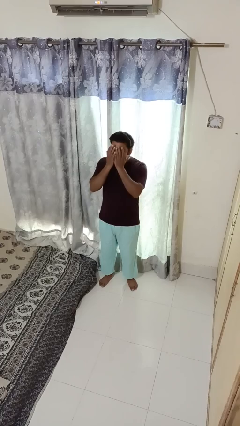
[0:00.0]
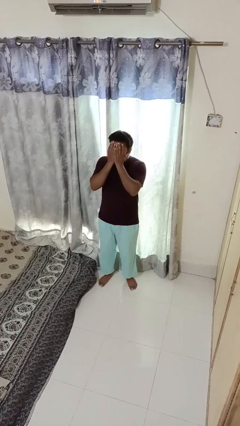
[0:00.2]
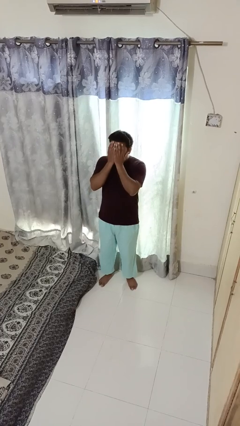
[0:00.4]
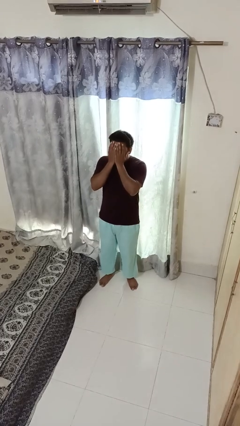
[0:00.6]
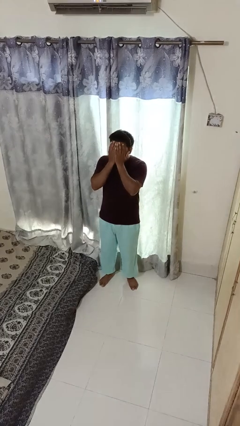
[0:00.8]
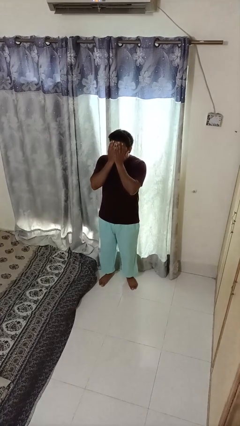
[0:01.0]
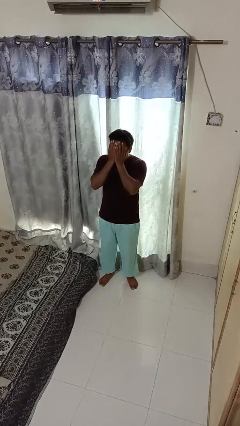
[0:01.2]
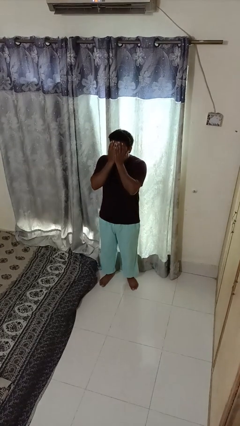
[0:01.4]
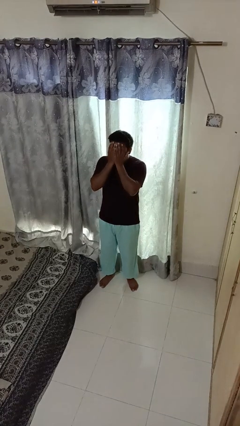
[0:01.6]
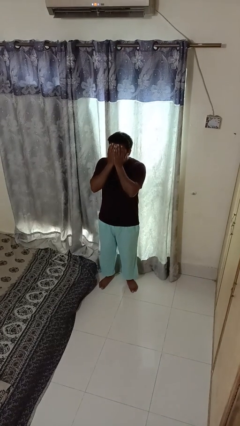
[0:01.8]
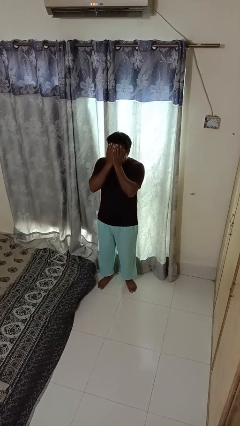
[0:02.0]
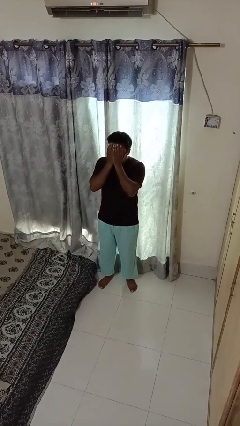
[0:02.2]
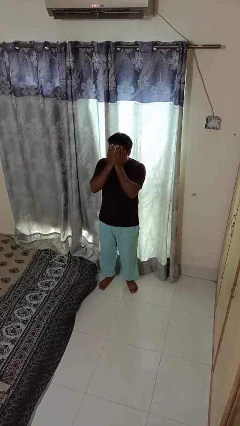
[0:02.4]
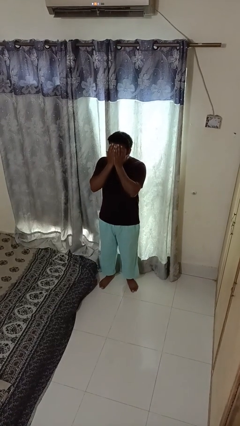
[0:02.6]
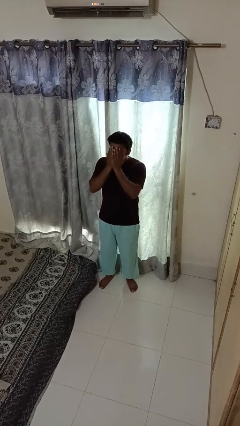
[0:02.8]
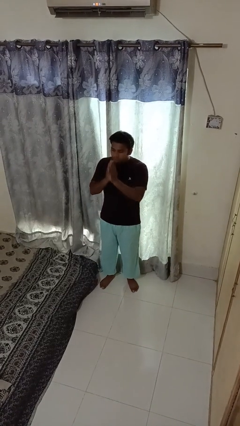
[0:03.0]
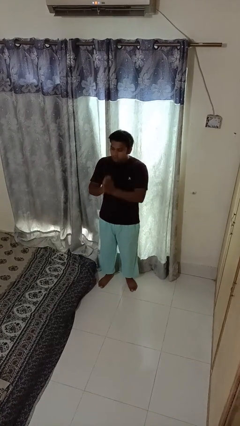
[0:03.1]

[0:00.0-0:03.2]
person covers face with hands

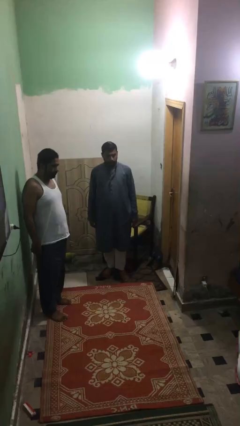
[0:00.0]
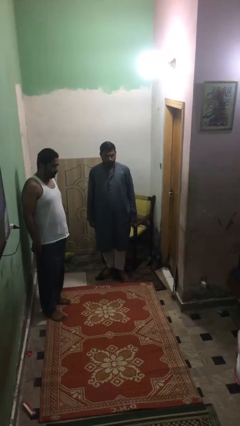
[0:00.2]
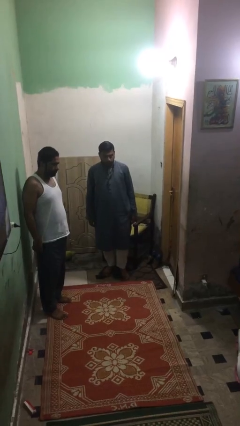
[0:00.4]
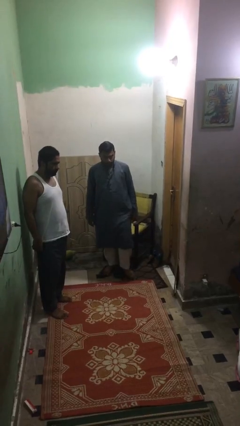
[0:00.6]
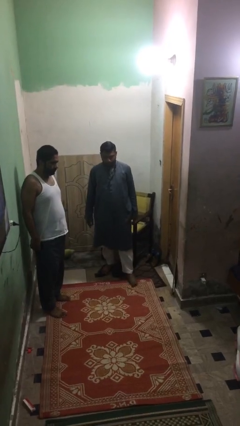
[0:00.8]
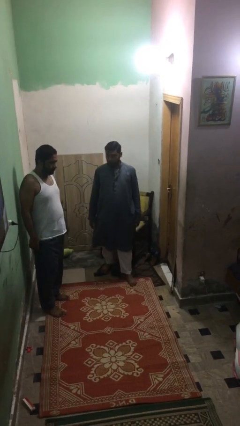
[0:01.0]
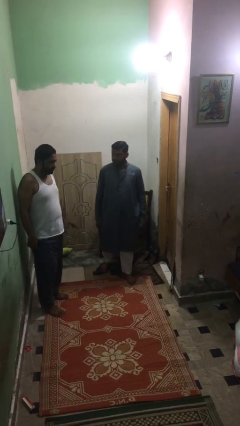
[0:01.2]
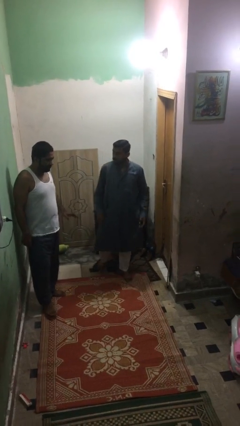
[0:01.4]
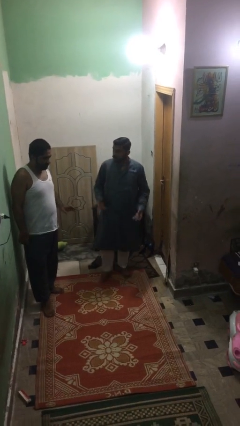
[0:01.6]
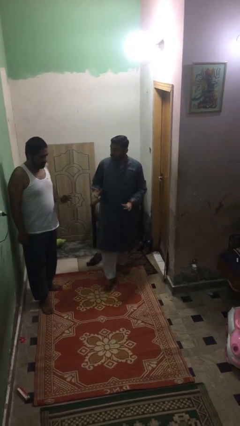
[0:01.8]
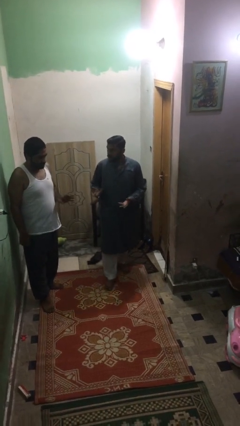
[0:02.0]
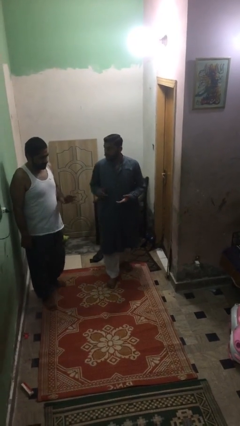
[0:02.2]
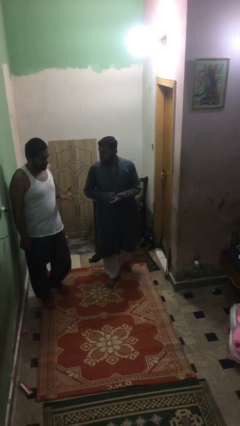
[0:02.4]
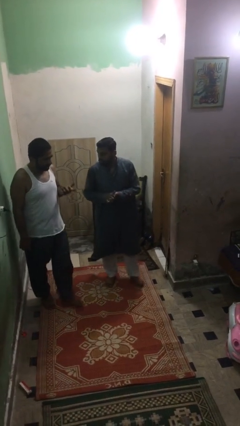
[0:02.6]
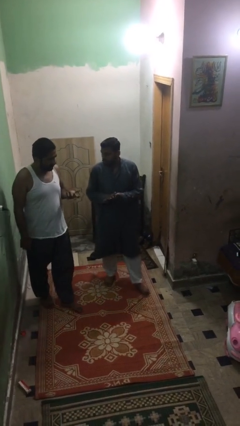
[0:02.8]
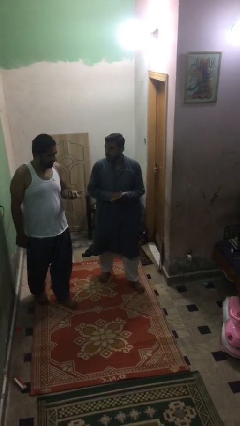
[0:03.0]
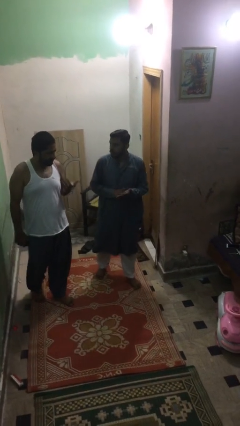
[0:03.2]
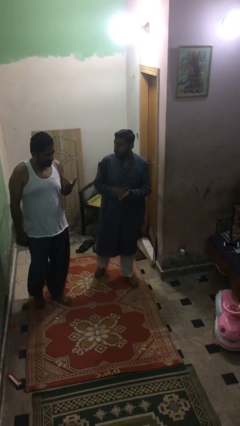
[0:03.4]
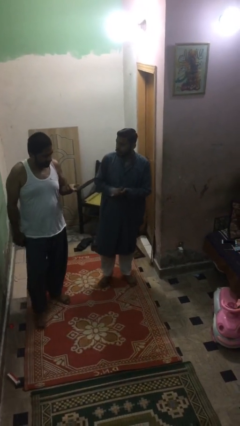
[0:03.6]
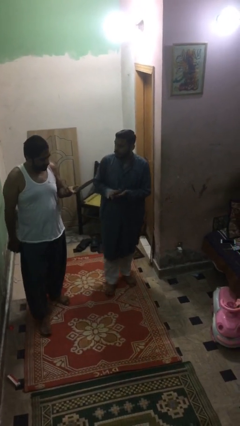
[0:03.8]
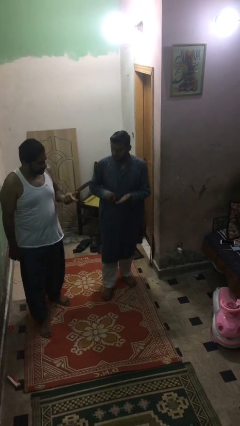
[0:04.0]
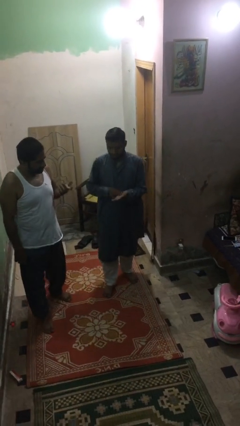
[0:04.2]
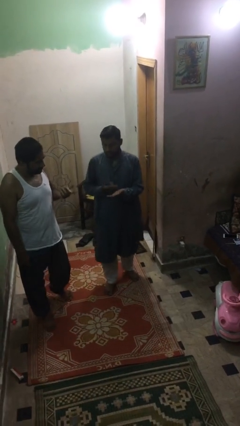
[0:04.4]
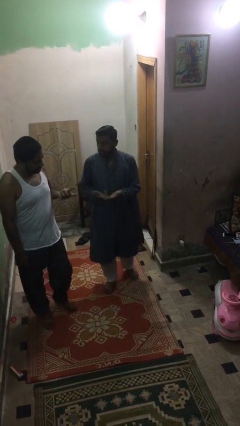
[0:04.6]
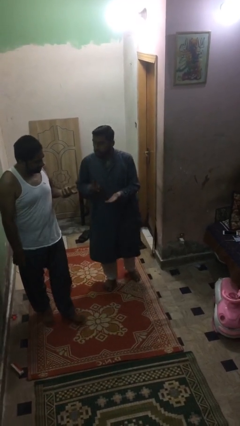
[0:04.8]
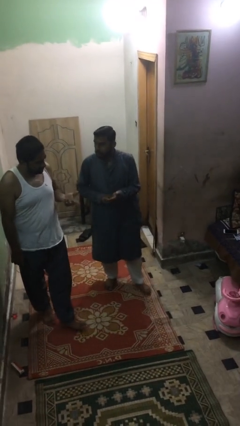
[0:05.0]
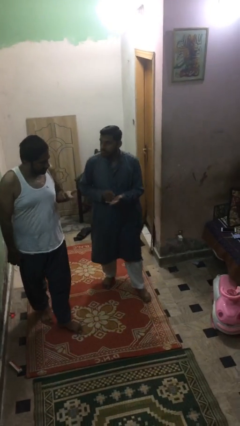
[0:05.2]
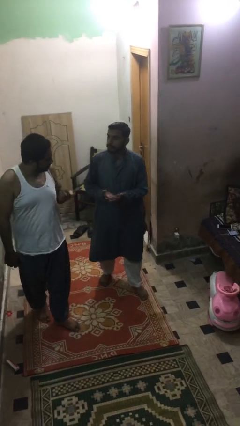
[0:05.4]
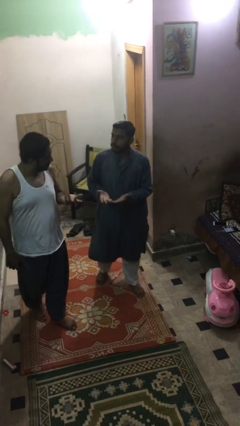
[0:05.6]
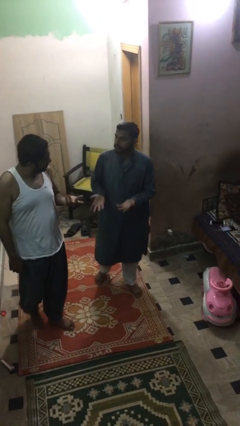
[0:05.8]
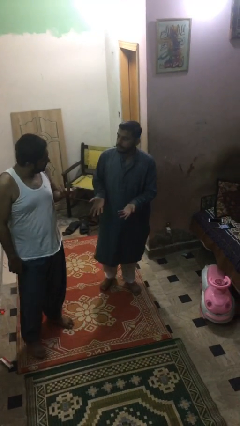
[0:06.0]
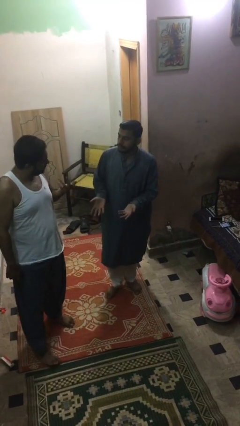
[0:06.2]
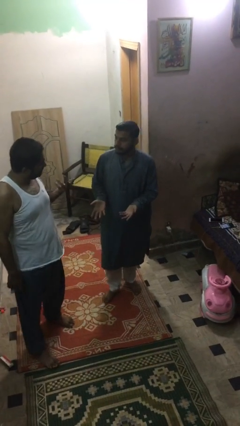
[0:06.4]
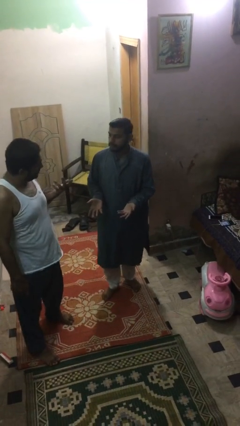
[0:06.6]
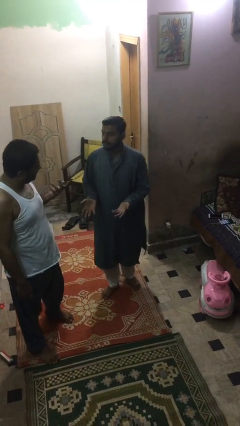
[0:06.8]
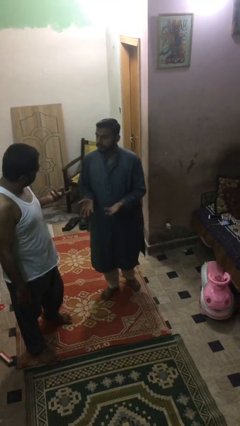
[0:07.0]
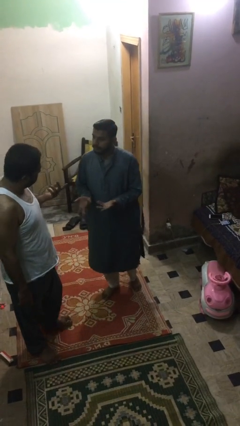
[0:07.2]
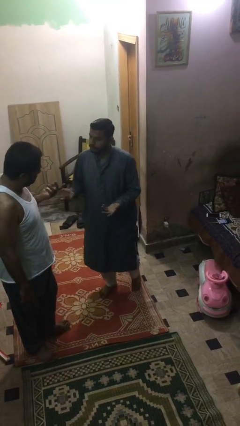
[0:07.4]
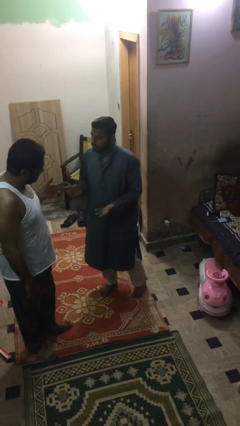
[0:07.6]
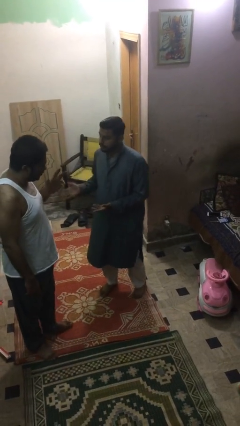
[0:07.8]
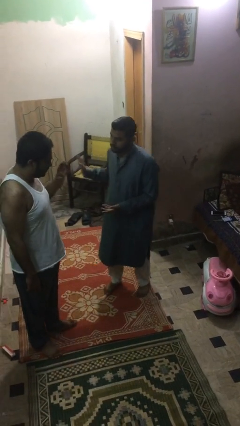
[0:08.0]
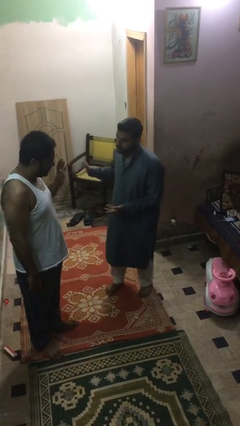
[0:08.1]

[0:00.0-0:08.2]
person talks to person

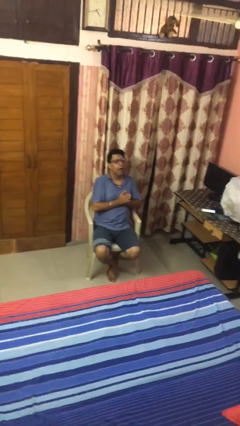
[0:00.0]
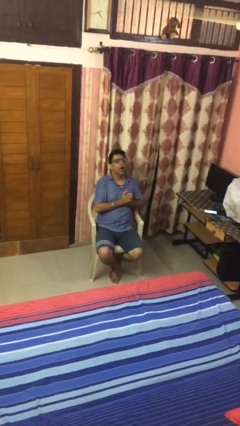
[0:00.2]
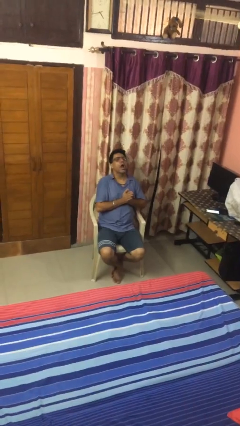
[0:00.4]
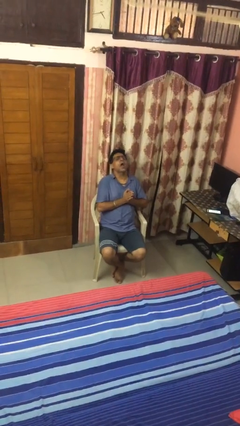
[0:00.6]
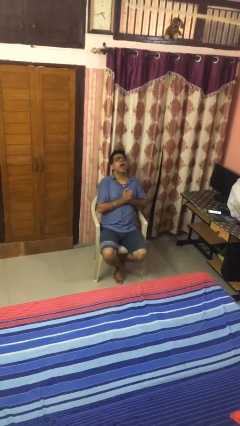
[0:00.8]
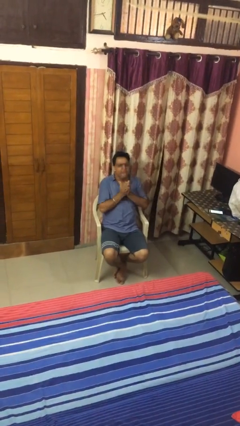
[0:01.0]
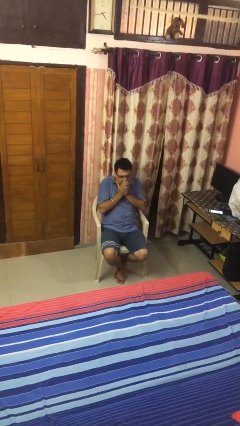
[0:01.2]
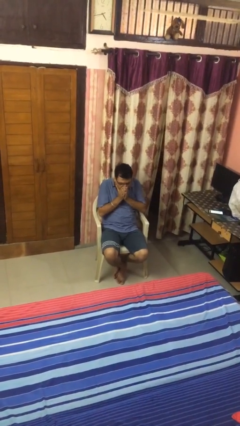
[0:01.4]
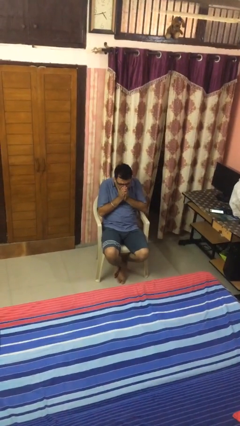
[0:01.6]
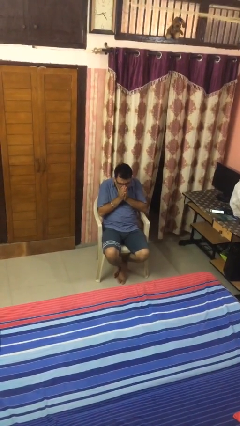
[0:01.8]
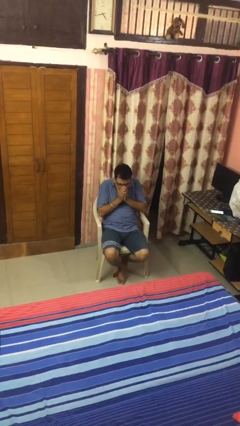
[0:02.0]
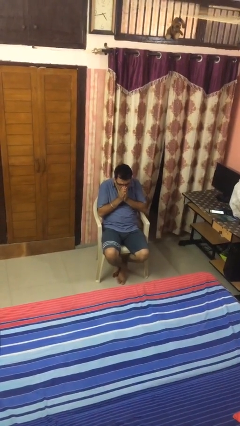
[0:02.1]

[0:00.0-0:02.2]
person sneezes into hand

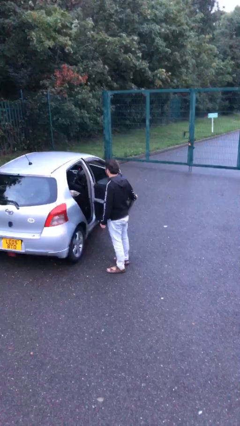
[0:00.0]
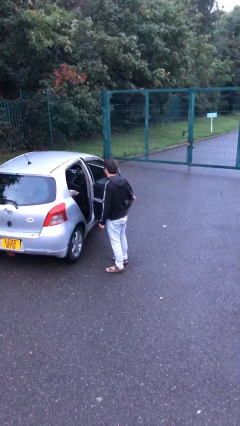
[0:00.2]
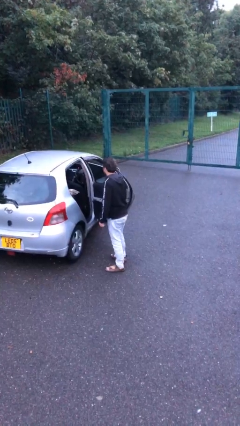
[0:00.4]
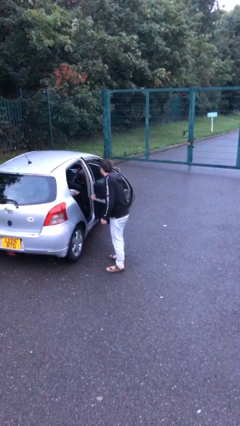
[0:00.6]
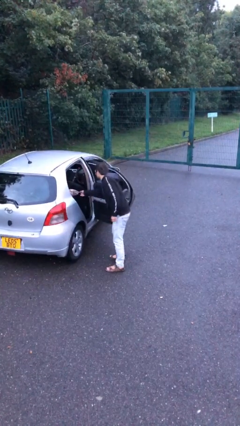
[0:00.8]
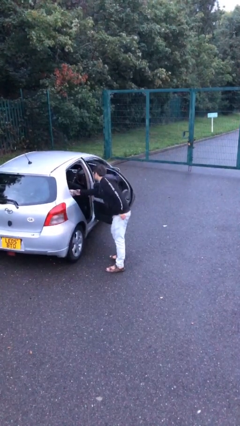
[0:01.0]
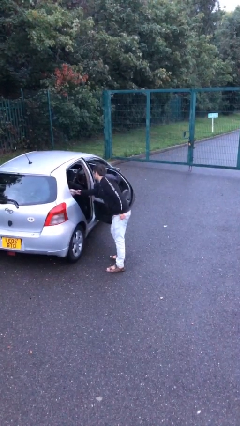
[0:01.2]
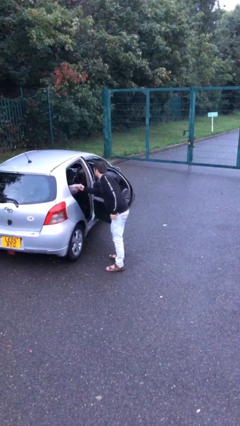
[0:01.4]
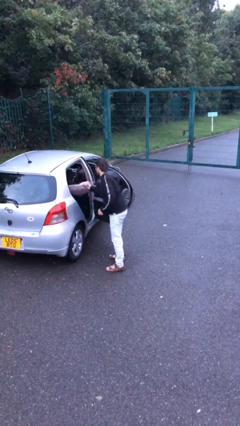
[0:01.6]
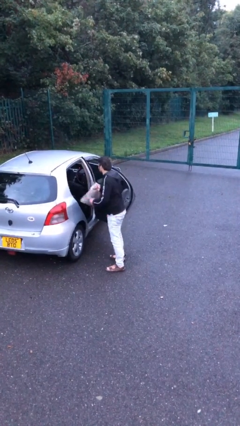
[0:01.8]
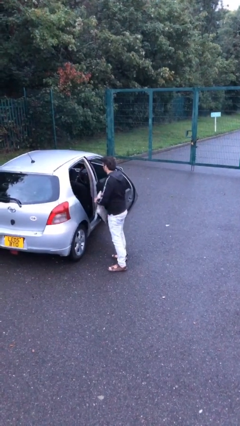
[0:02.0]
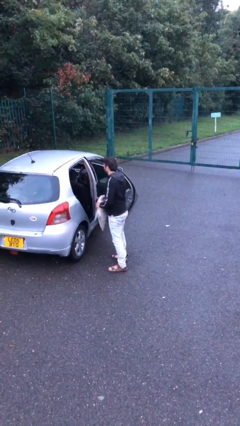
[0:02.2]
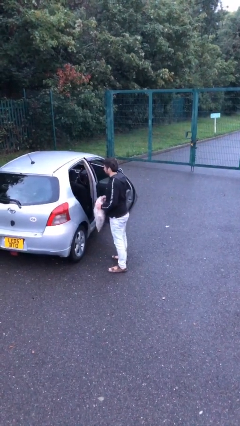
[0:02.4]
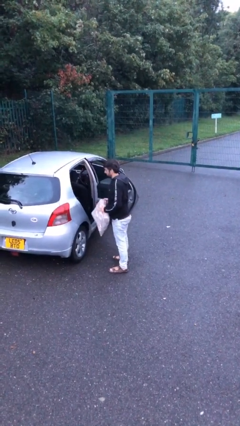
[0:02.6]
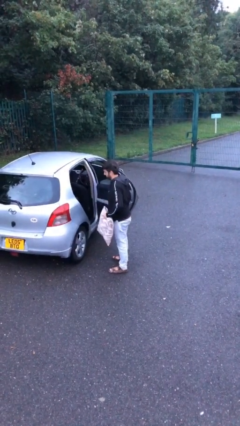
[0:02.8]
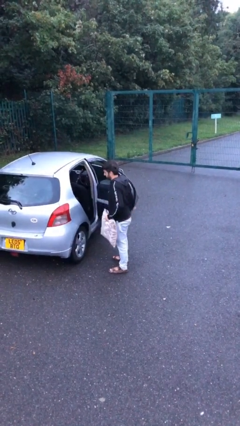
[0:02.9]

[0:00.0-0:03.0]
person unloads car

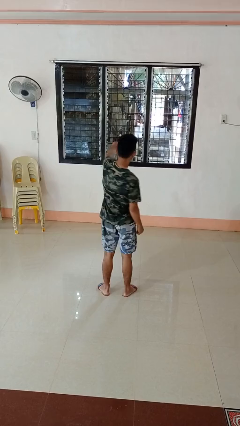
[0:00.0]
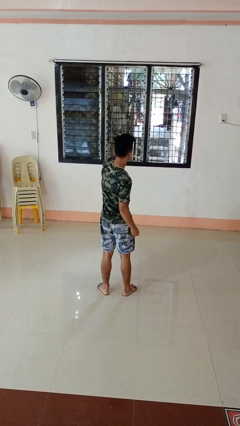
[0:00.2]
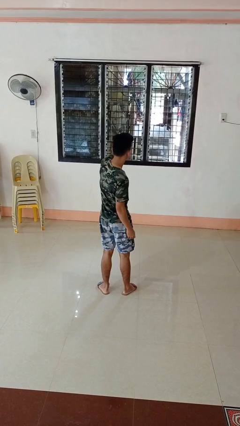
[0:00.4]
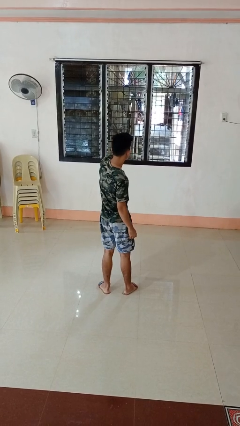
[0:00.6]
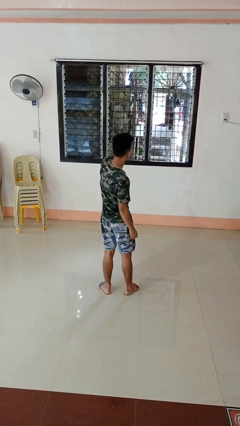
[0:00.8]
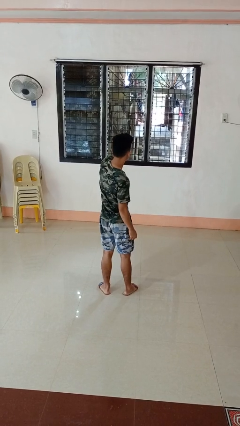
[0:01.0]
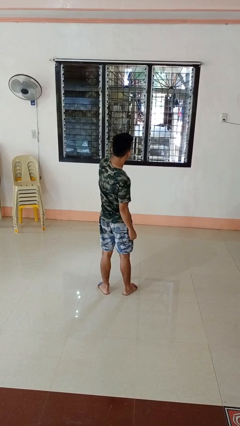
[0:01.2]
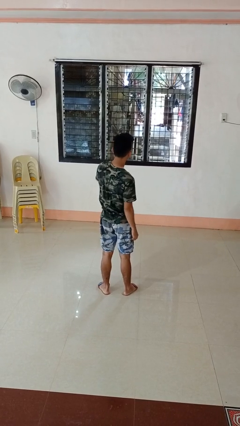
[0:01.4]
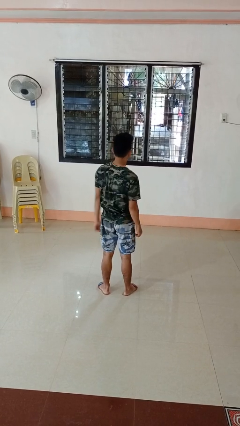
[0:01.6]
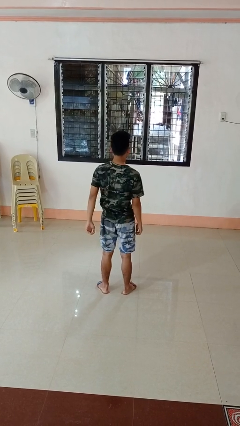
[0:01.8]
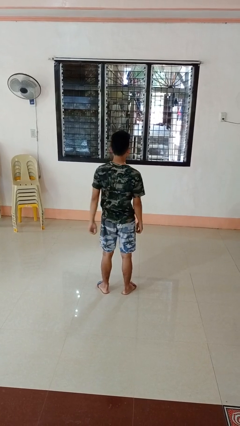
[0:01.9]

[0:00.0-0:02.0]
person punches
